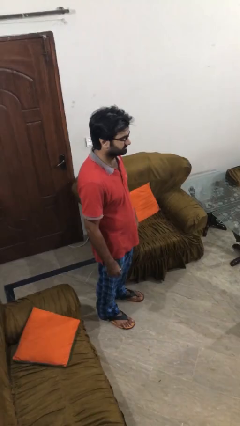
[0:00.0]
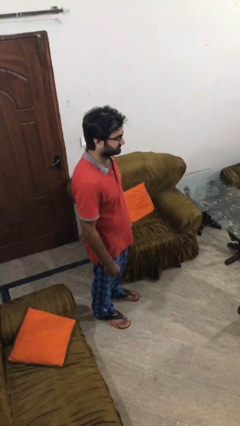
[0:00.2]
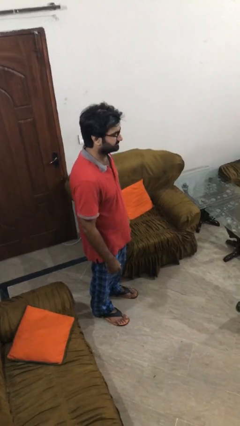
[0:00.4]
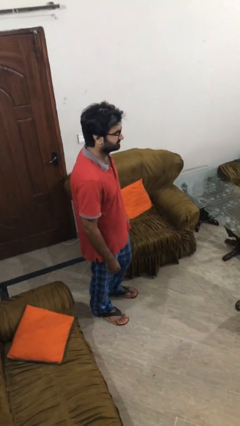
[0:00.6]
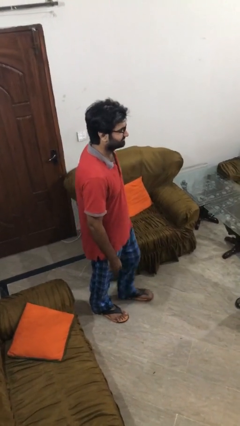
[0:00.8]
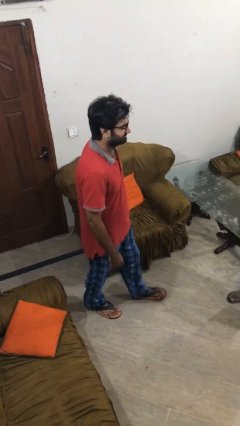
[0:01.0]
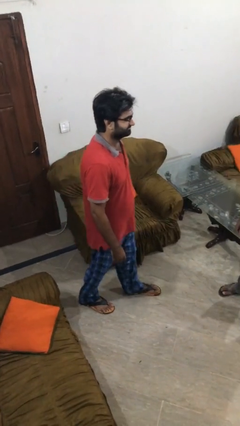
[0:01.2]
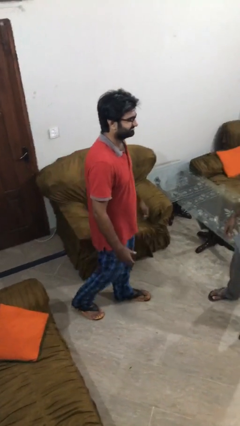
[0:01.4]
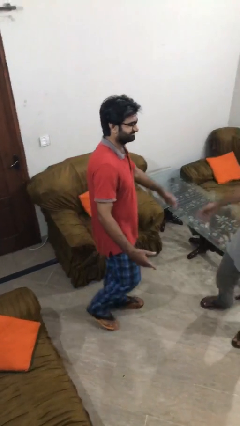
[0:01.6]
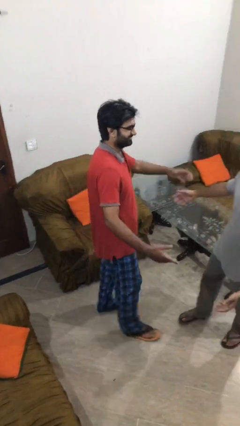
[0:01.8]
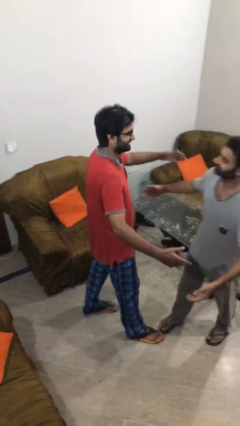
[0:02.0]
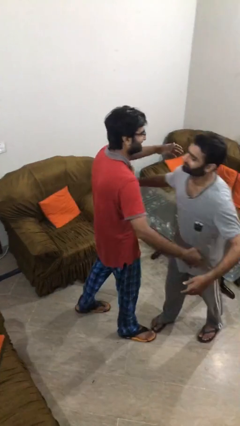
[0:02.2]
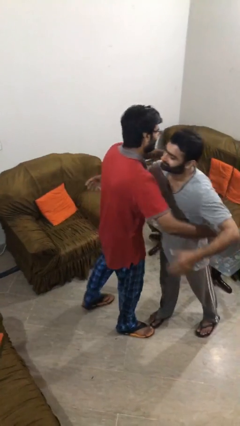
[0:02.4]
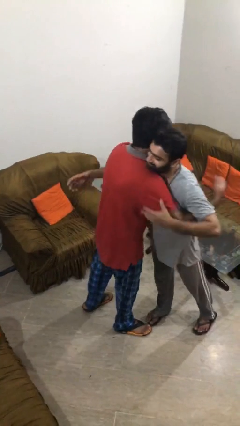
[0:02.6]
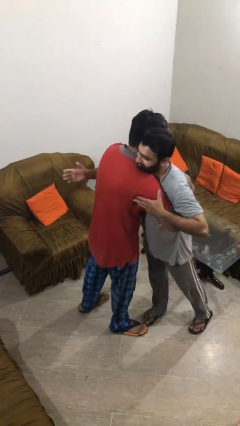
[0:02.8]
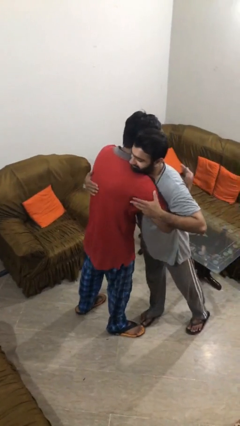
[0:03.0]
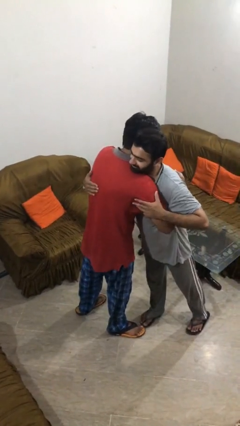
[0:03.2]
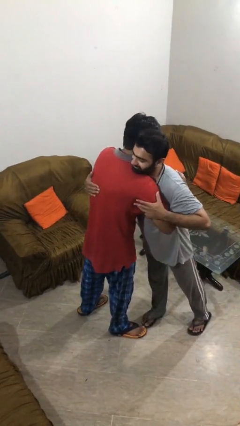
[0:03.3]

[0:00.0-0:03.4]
person embraces person

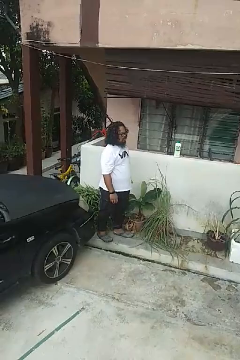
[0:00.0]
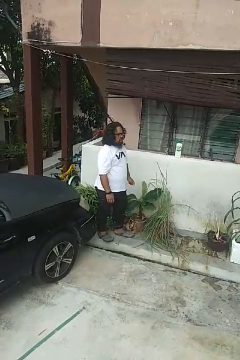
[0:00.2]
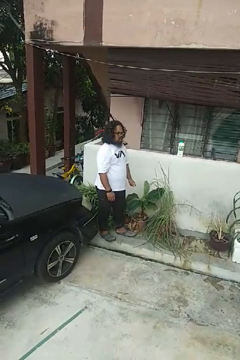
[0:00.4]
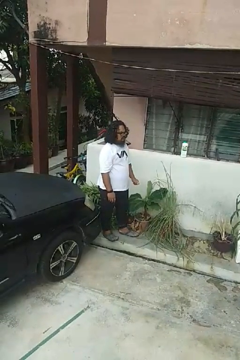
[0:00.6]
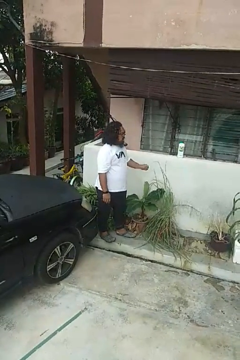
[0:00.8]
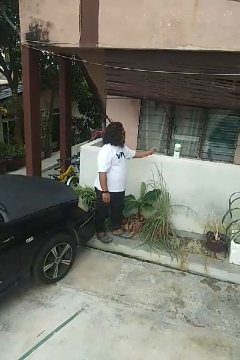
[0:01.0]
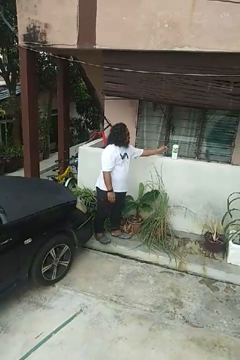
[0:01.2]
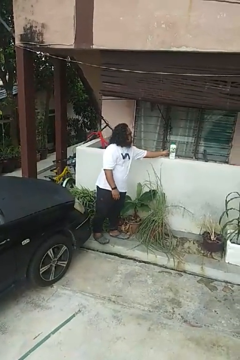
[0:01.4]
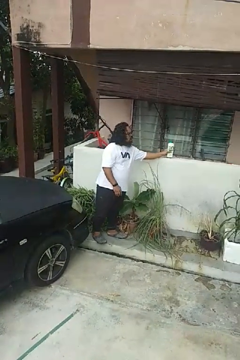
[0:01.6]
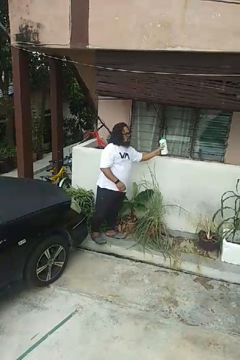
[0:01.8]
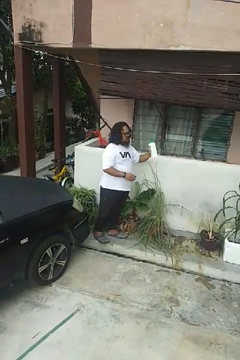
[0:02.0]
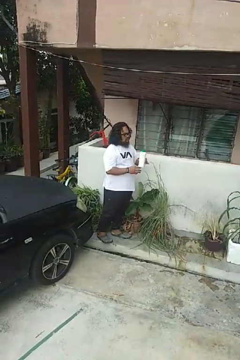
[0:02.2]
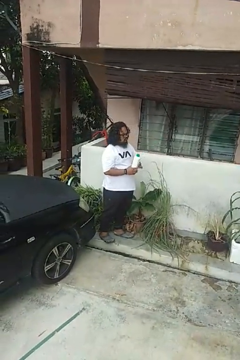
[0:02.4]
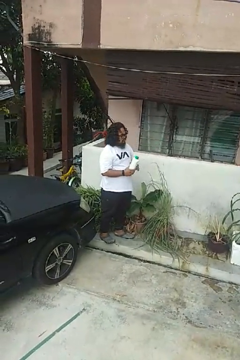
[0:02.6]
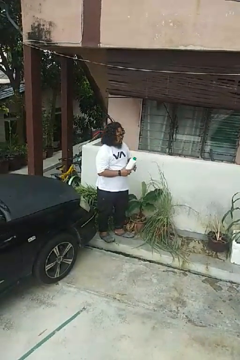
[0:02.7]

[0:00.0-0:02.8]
person picks up object from countertop

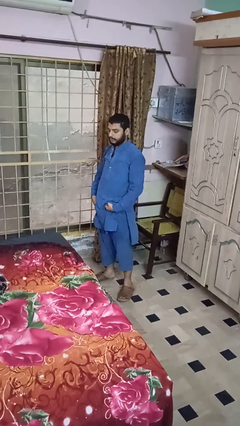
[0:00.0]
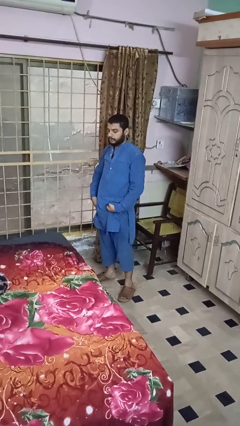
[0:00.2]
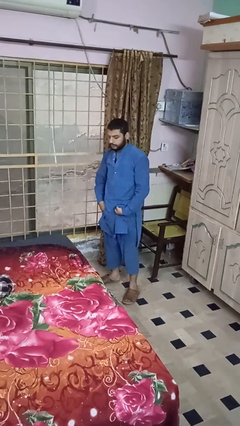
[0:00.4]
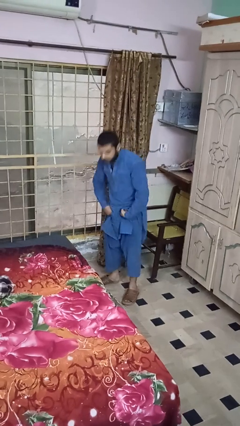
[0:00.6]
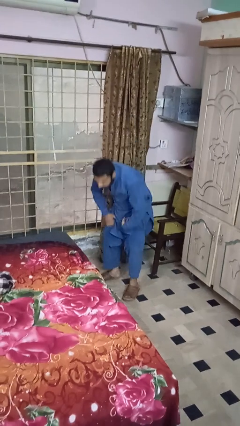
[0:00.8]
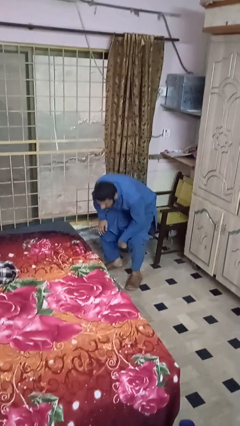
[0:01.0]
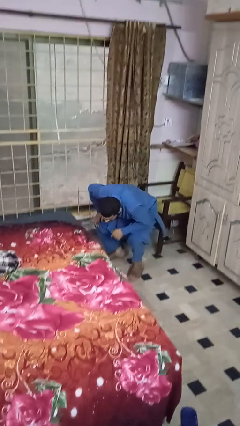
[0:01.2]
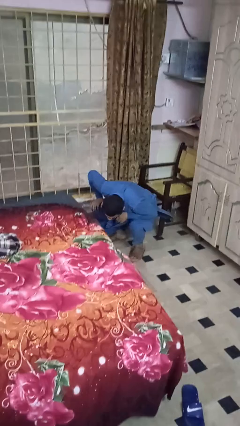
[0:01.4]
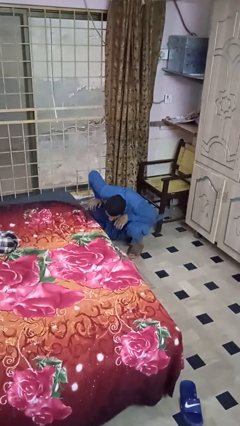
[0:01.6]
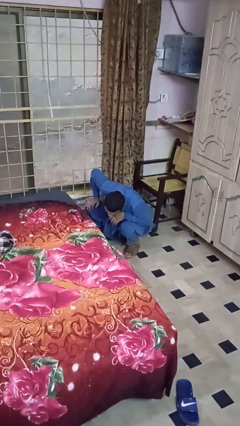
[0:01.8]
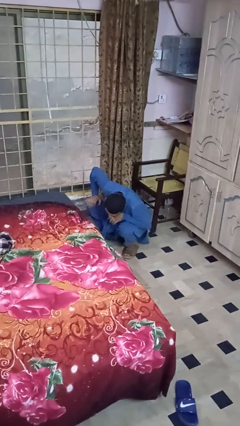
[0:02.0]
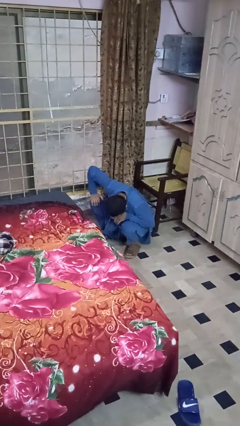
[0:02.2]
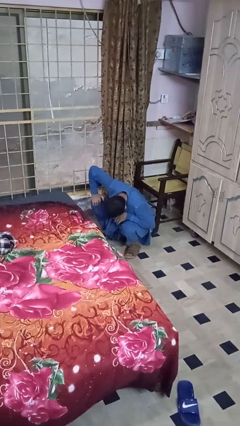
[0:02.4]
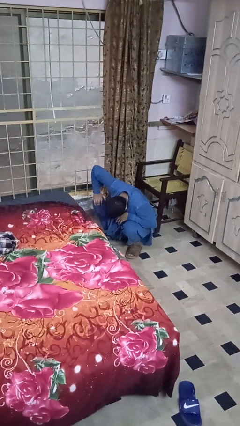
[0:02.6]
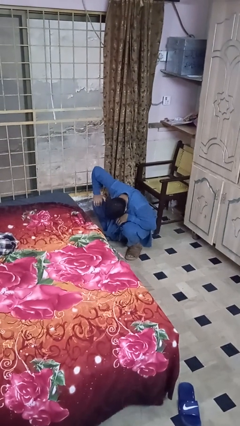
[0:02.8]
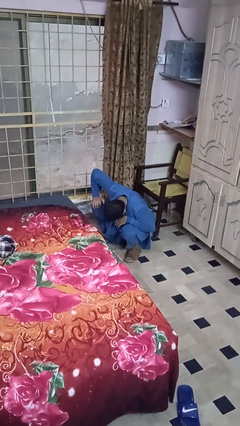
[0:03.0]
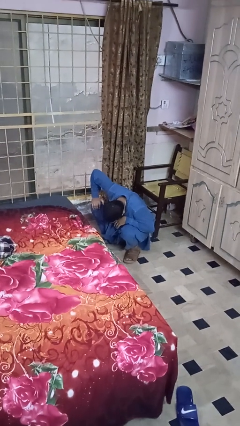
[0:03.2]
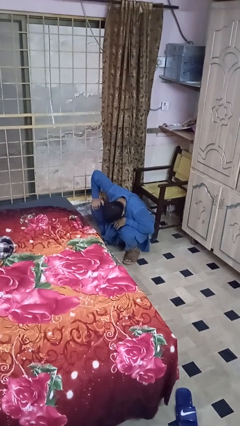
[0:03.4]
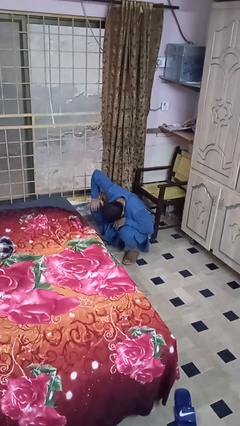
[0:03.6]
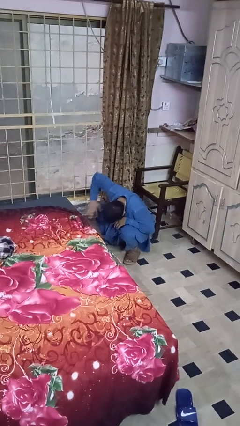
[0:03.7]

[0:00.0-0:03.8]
person searches under bed

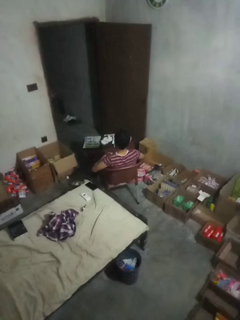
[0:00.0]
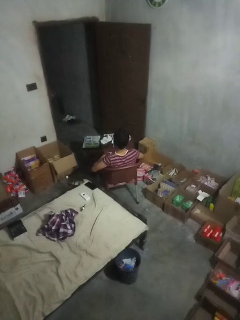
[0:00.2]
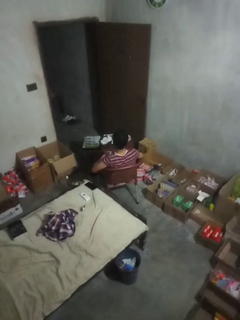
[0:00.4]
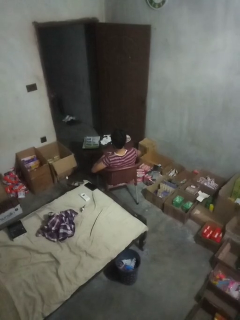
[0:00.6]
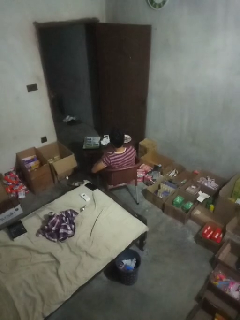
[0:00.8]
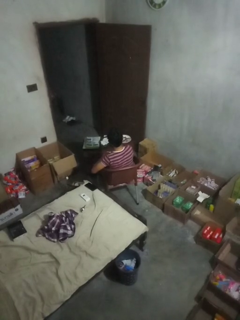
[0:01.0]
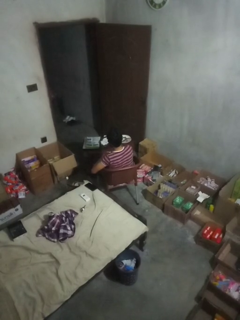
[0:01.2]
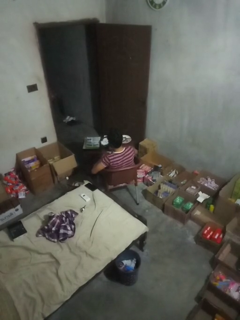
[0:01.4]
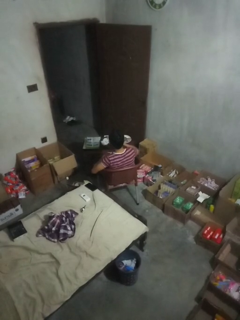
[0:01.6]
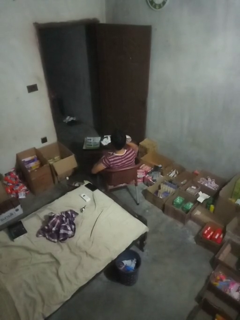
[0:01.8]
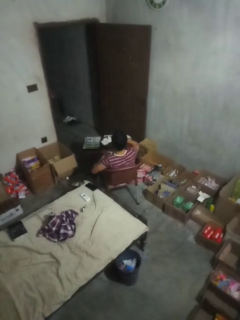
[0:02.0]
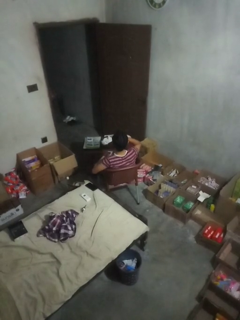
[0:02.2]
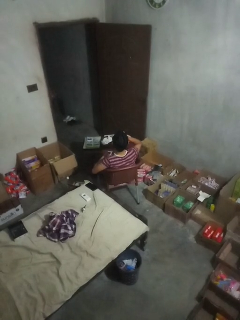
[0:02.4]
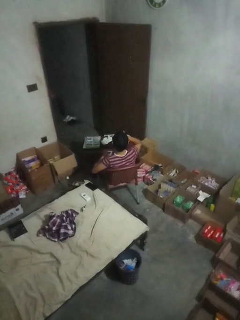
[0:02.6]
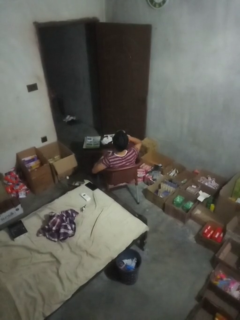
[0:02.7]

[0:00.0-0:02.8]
person drinks from cup

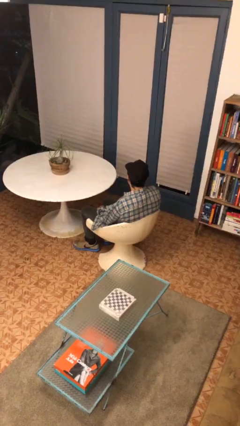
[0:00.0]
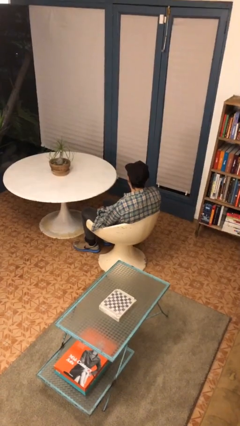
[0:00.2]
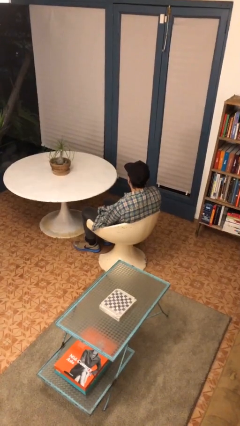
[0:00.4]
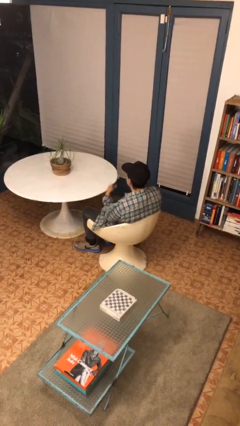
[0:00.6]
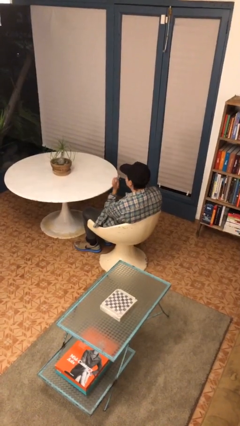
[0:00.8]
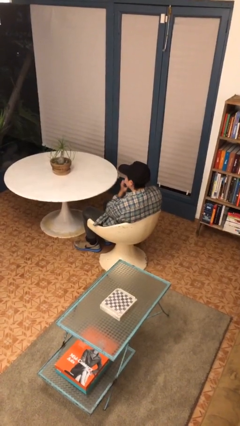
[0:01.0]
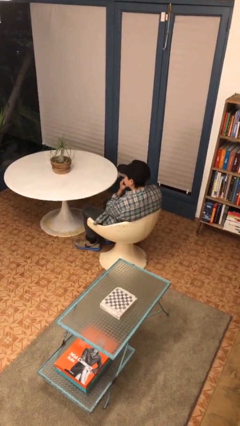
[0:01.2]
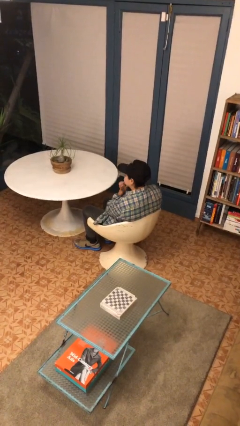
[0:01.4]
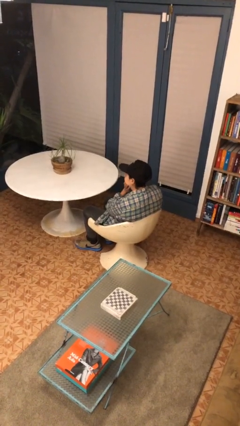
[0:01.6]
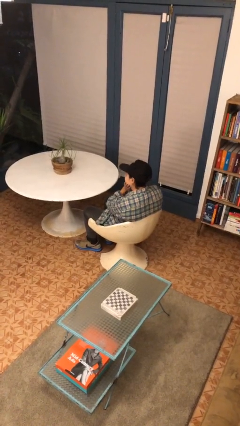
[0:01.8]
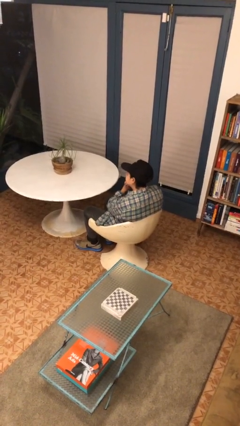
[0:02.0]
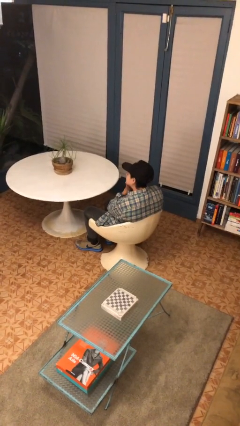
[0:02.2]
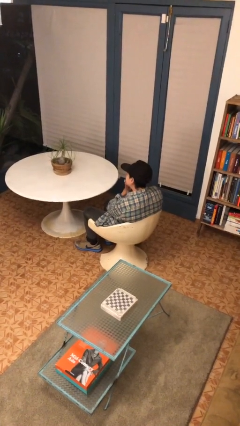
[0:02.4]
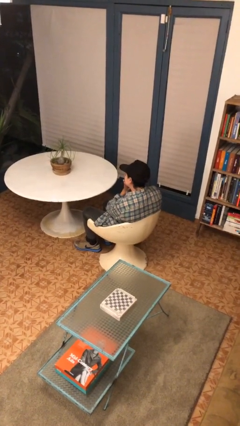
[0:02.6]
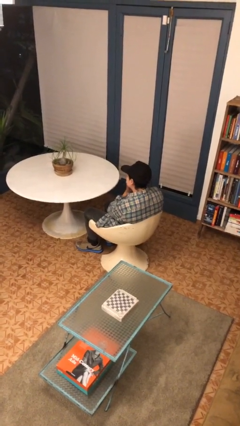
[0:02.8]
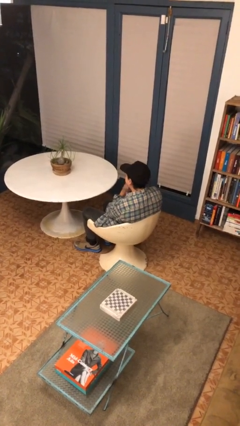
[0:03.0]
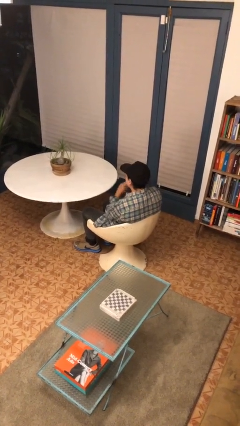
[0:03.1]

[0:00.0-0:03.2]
person strokes chin

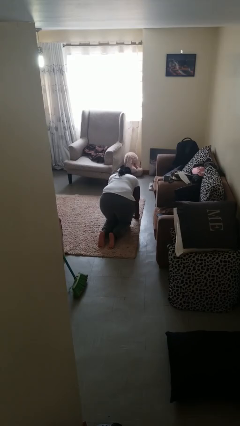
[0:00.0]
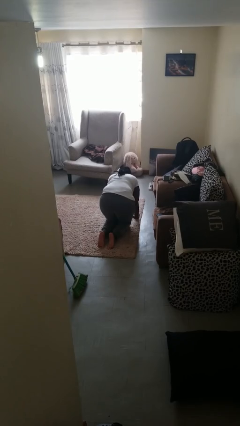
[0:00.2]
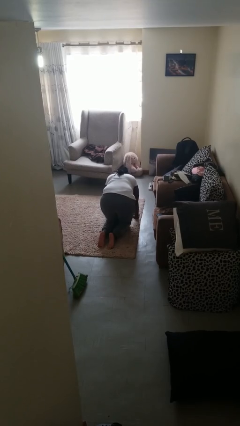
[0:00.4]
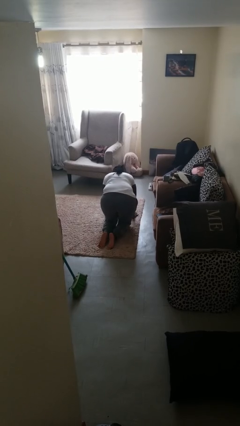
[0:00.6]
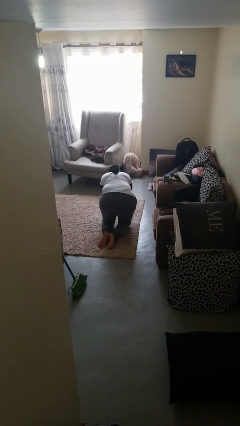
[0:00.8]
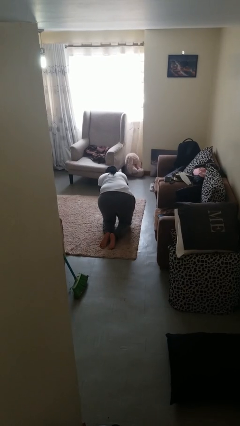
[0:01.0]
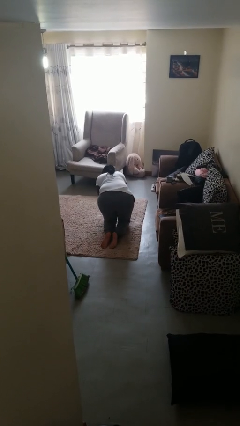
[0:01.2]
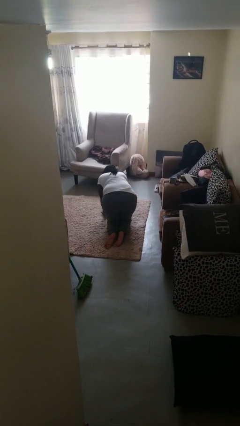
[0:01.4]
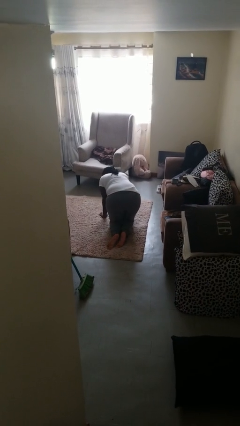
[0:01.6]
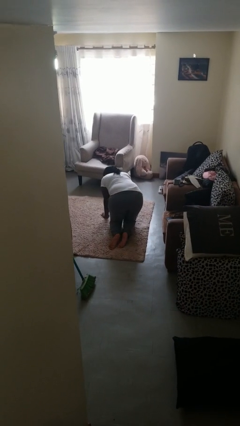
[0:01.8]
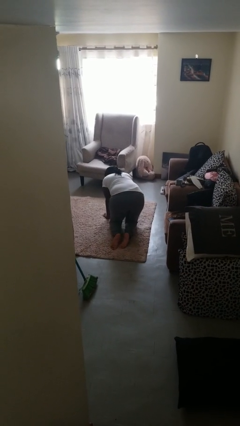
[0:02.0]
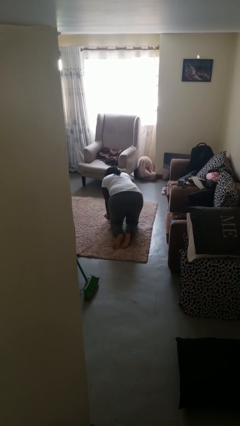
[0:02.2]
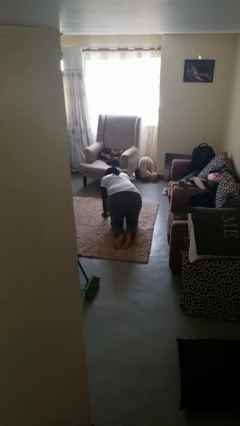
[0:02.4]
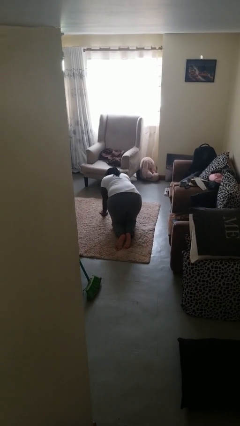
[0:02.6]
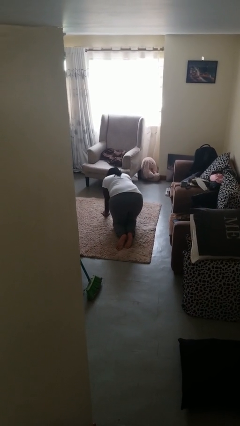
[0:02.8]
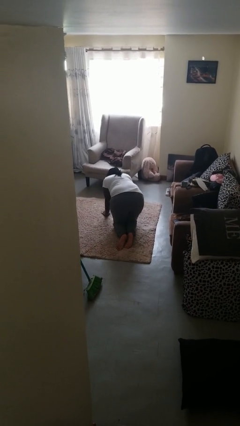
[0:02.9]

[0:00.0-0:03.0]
person crawls
